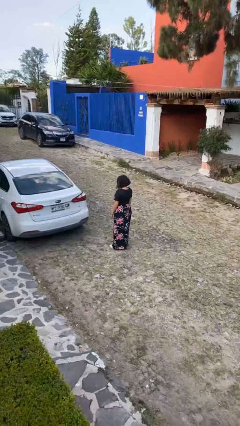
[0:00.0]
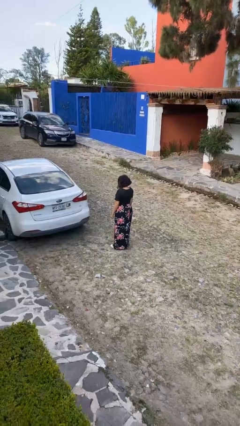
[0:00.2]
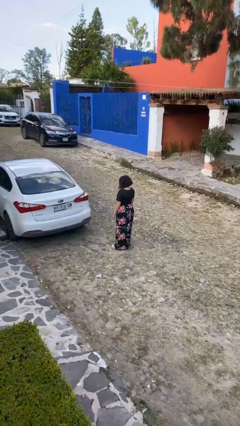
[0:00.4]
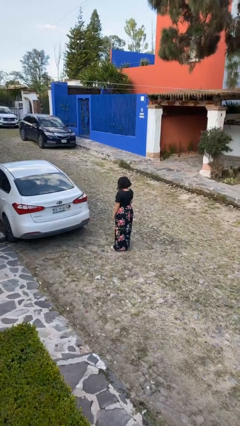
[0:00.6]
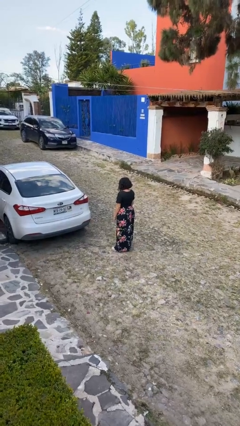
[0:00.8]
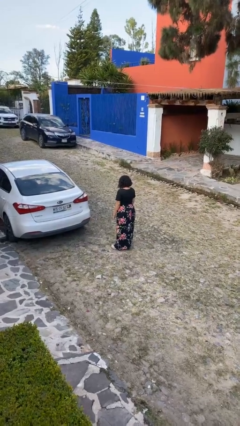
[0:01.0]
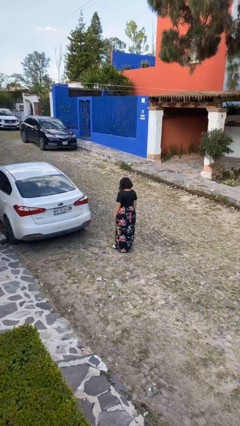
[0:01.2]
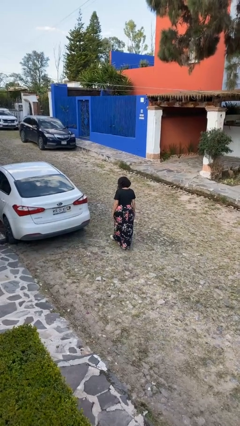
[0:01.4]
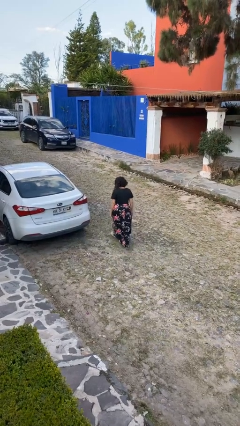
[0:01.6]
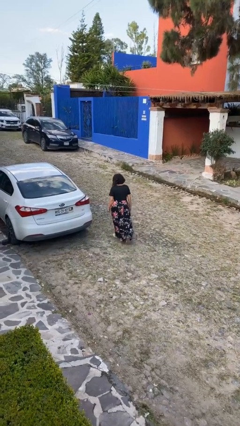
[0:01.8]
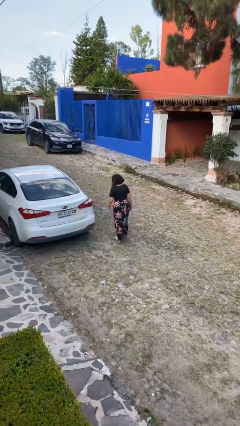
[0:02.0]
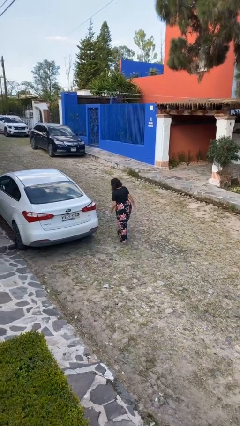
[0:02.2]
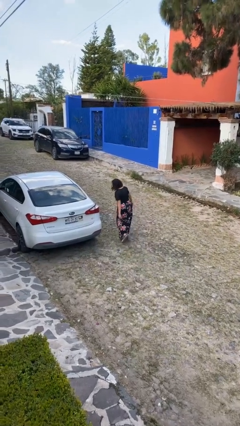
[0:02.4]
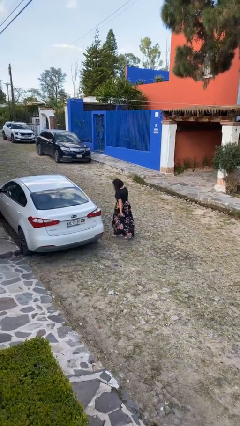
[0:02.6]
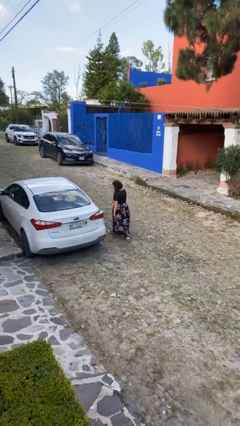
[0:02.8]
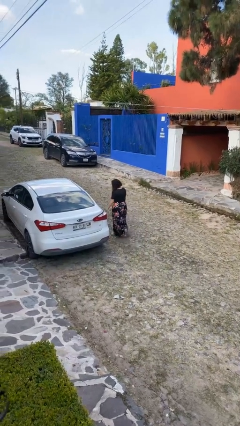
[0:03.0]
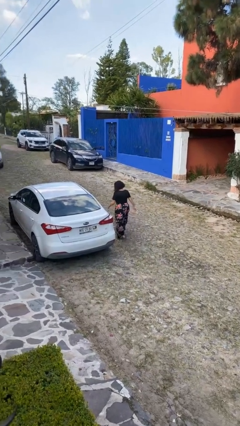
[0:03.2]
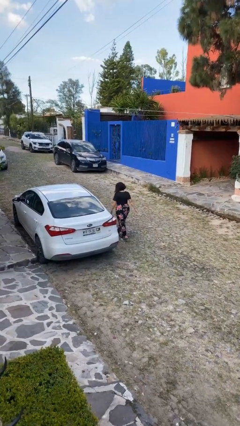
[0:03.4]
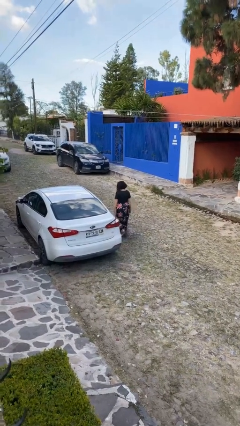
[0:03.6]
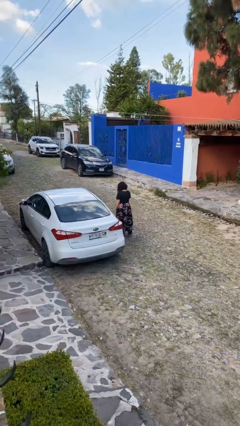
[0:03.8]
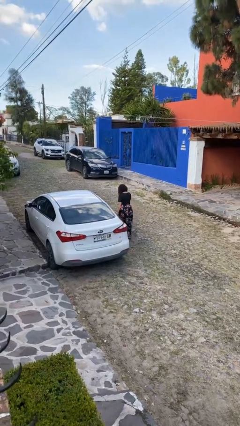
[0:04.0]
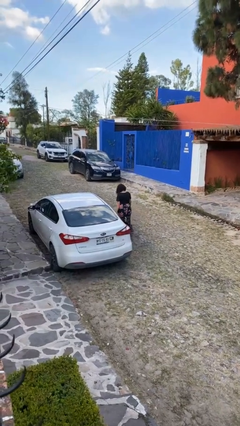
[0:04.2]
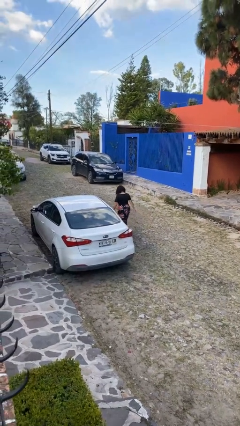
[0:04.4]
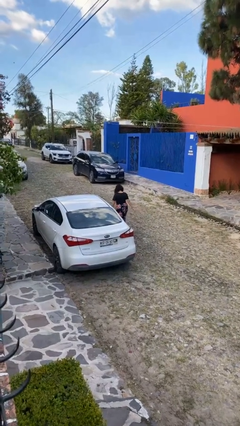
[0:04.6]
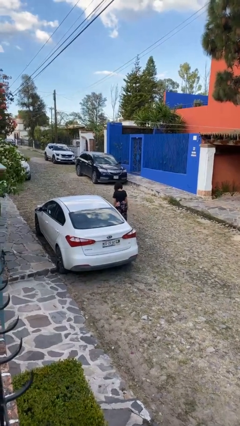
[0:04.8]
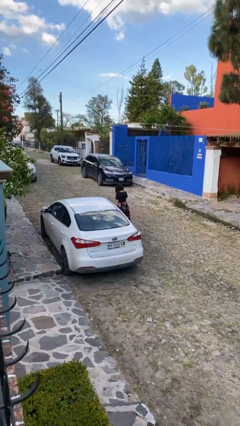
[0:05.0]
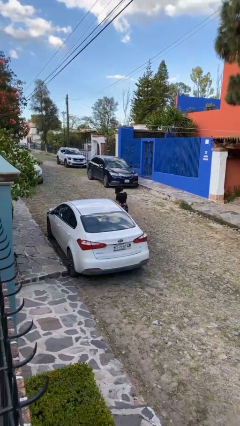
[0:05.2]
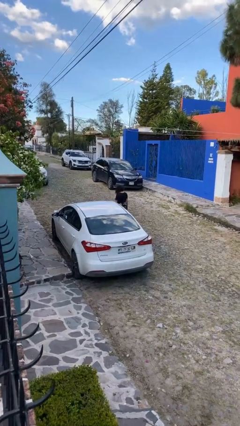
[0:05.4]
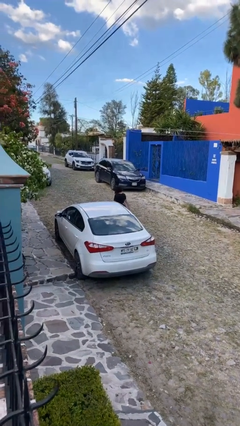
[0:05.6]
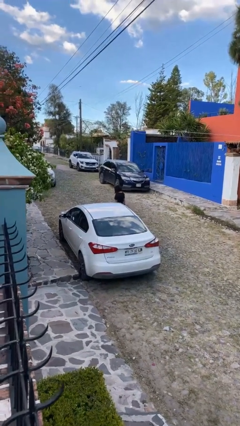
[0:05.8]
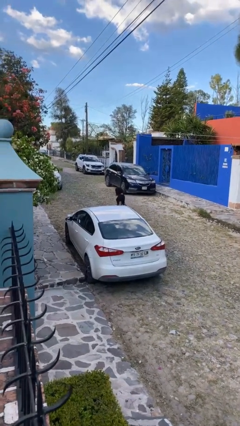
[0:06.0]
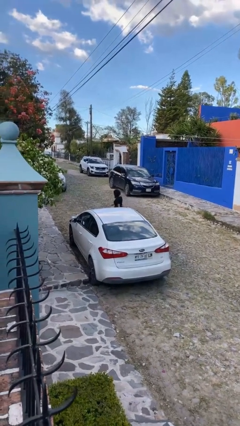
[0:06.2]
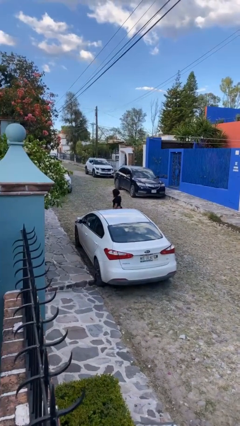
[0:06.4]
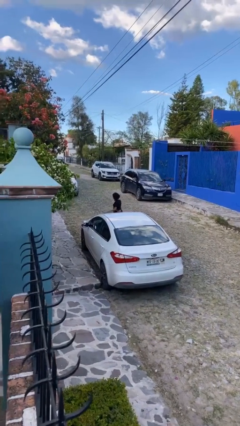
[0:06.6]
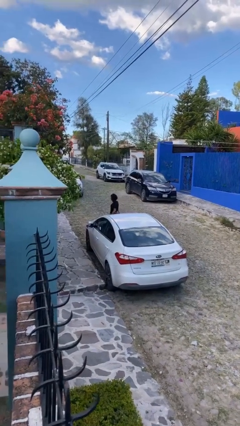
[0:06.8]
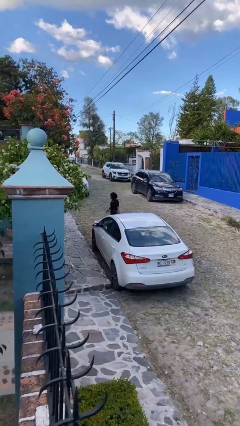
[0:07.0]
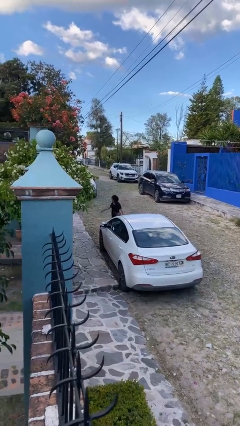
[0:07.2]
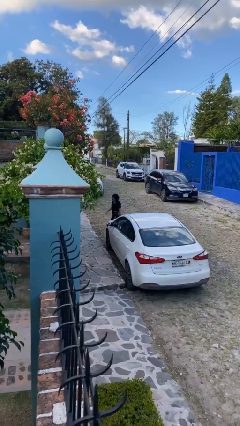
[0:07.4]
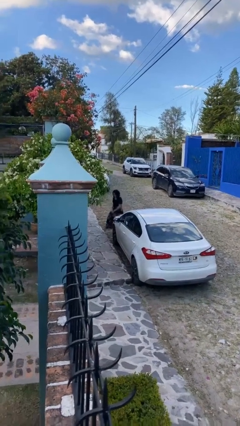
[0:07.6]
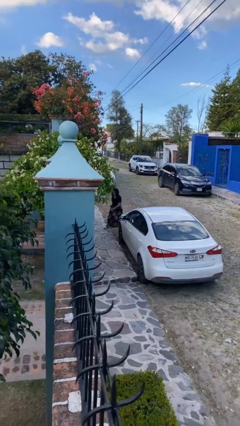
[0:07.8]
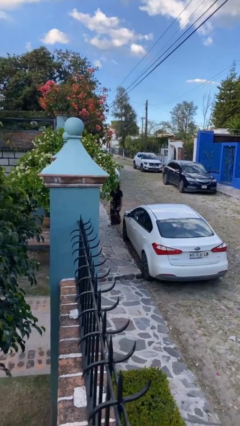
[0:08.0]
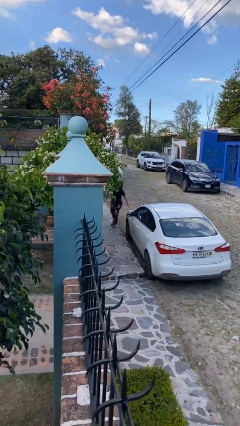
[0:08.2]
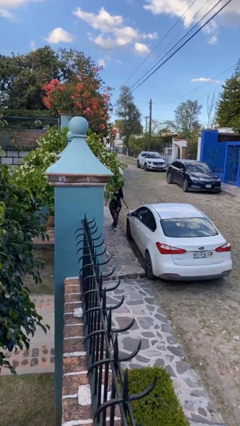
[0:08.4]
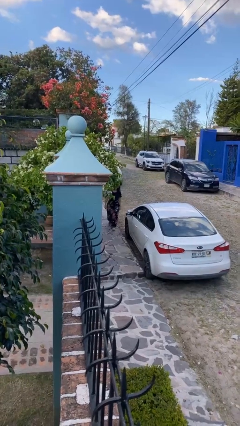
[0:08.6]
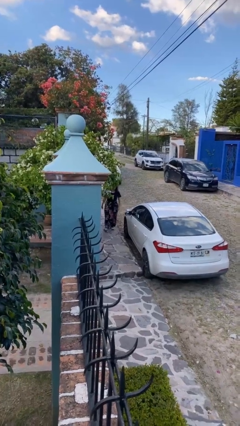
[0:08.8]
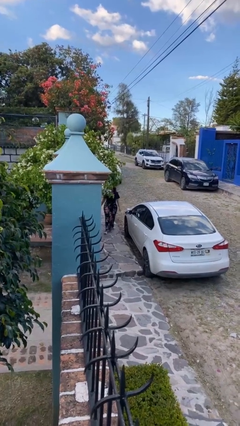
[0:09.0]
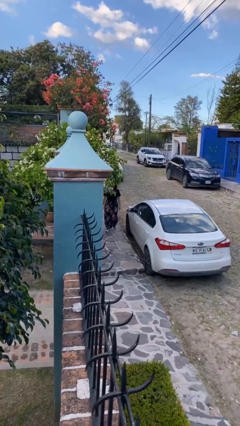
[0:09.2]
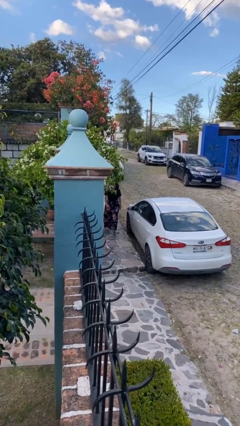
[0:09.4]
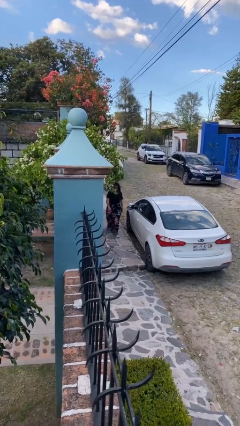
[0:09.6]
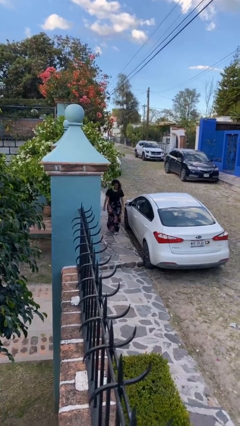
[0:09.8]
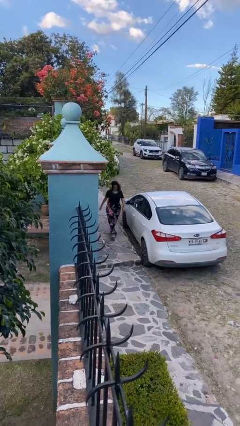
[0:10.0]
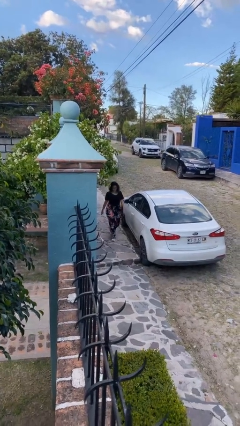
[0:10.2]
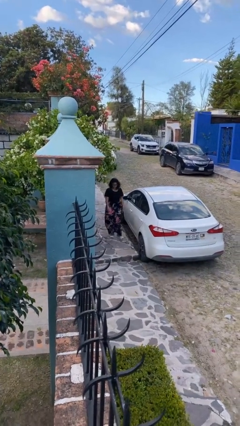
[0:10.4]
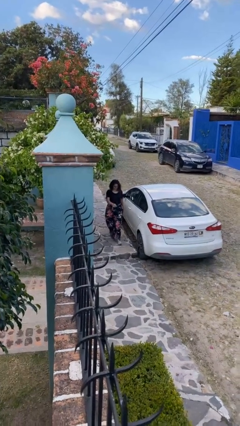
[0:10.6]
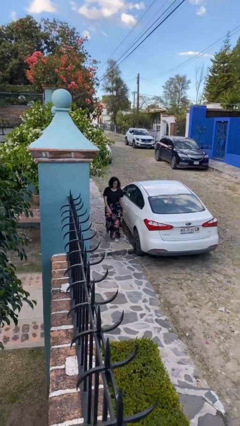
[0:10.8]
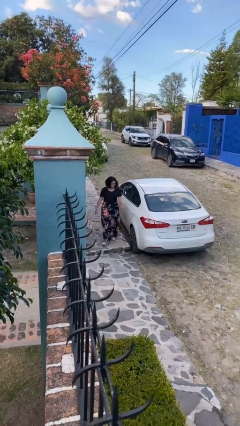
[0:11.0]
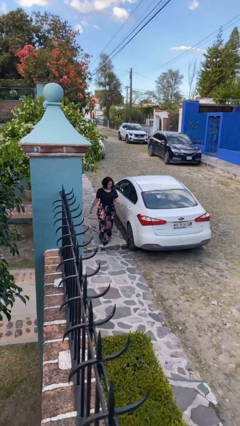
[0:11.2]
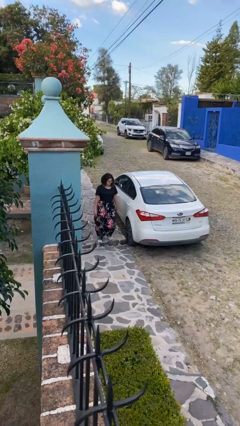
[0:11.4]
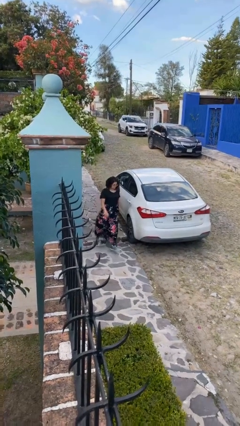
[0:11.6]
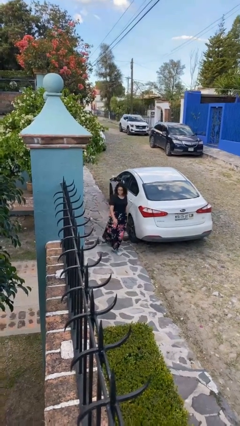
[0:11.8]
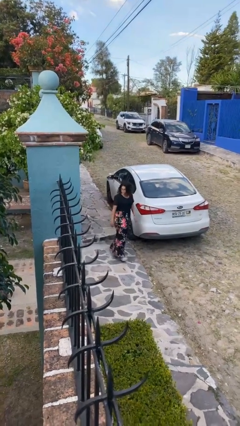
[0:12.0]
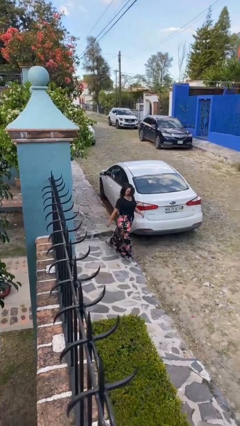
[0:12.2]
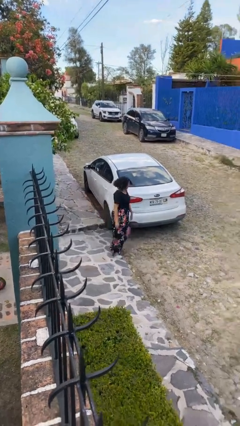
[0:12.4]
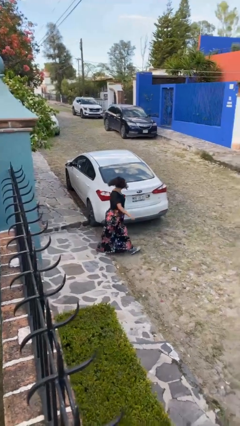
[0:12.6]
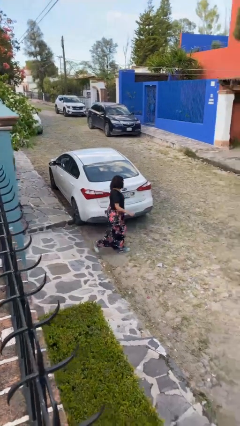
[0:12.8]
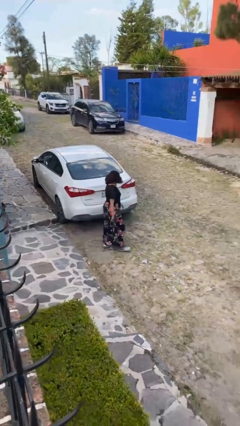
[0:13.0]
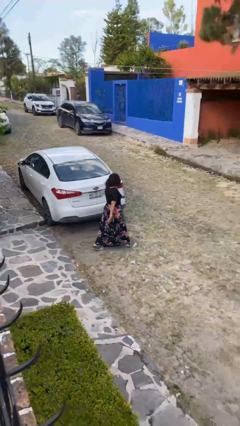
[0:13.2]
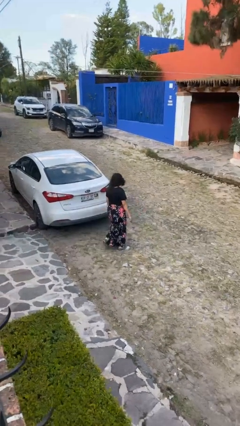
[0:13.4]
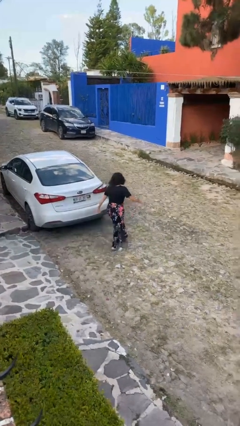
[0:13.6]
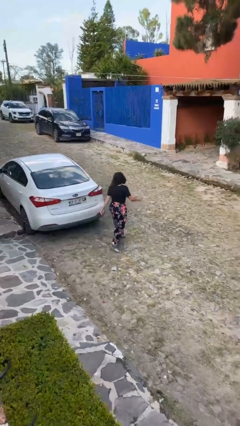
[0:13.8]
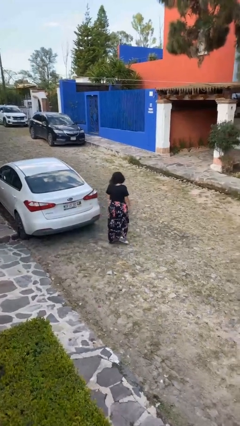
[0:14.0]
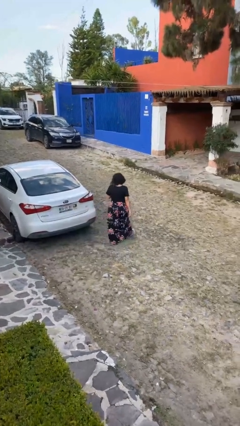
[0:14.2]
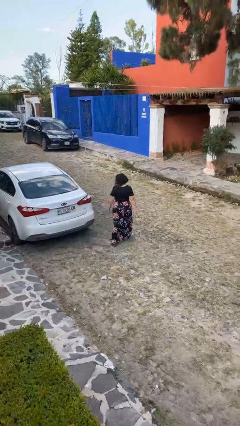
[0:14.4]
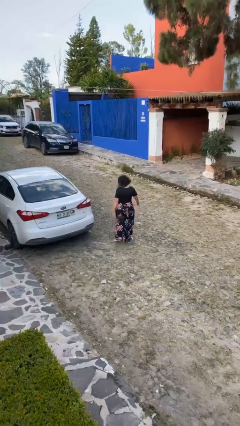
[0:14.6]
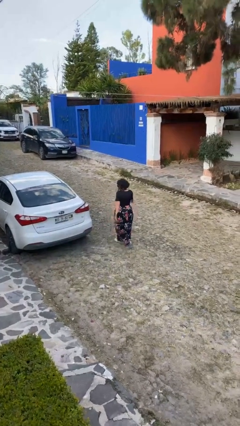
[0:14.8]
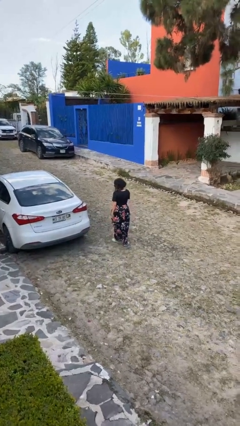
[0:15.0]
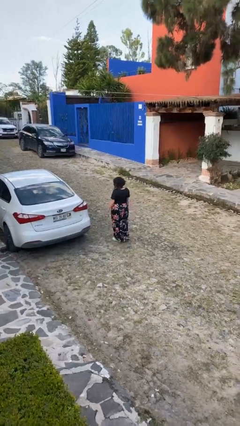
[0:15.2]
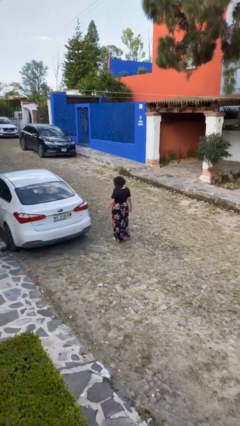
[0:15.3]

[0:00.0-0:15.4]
person walks around car

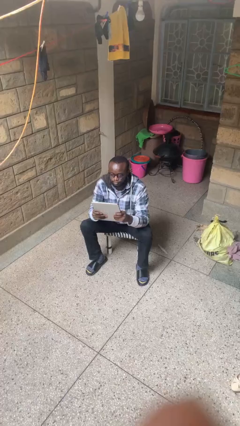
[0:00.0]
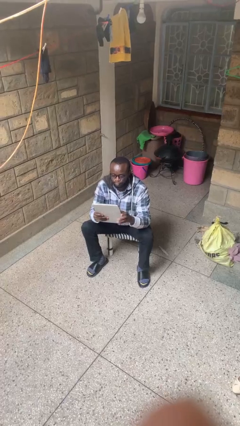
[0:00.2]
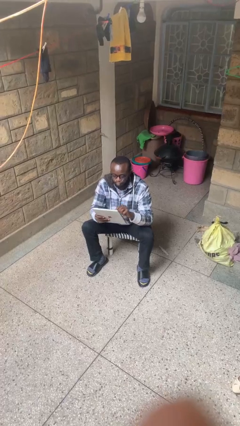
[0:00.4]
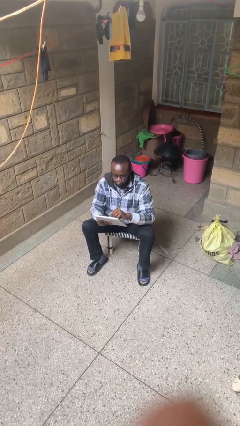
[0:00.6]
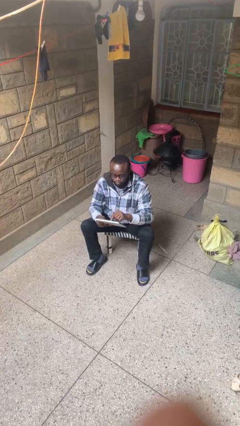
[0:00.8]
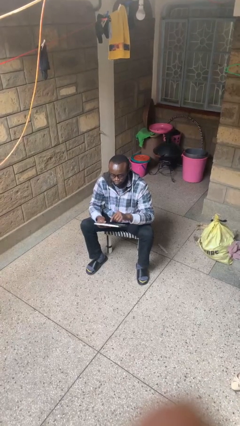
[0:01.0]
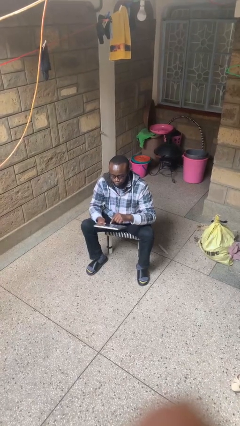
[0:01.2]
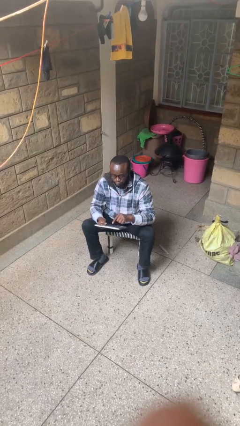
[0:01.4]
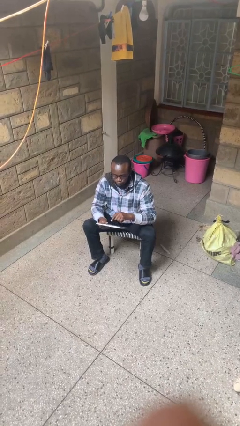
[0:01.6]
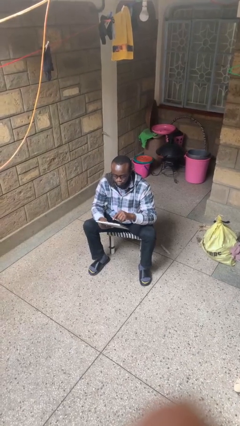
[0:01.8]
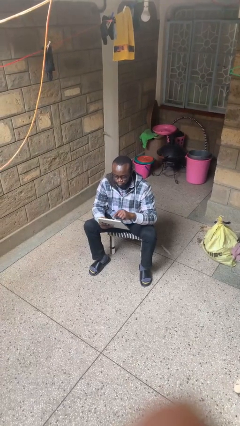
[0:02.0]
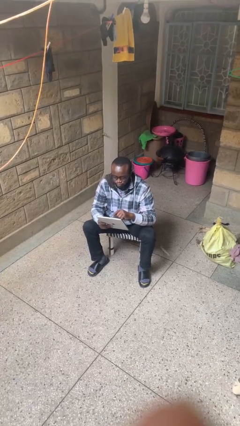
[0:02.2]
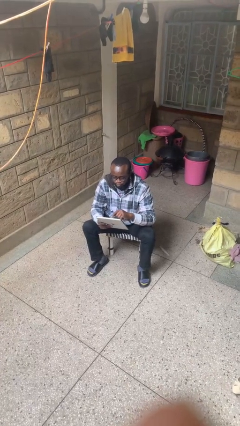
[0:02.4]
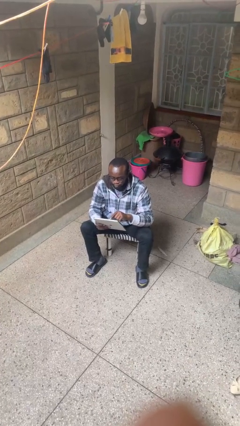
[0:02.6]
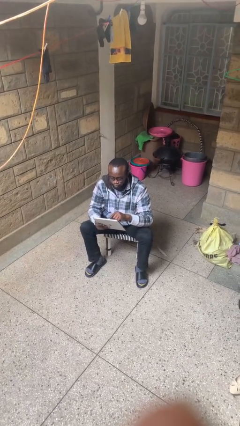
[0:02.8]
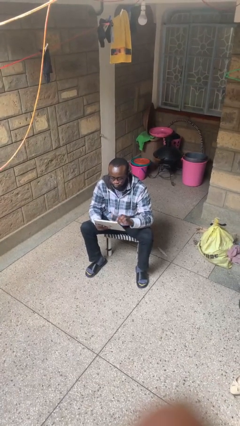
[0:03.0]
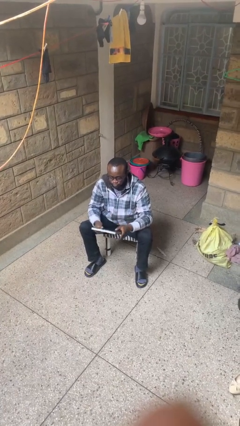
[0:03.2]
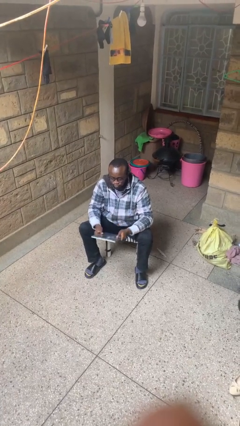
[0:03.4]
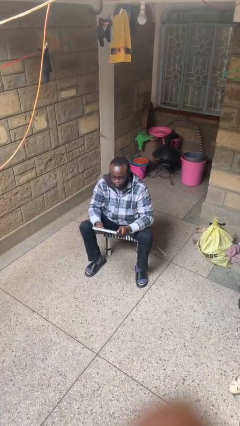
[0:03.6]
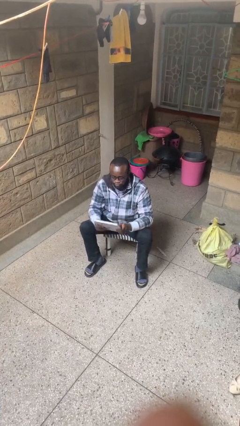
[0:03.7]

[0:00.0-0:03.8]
person interacts with tablet
